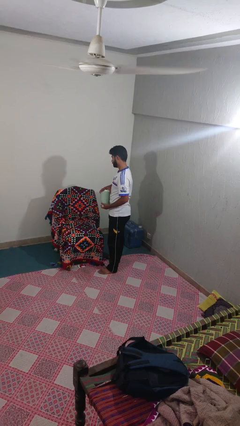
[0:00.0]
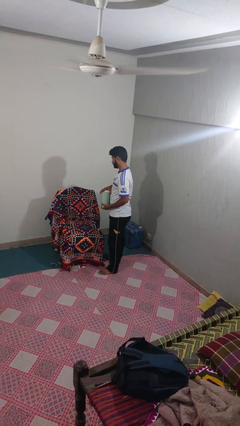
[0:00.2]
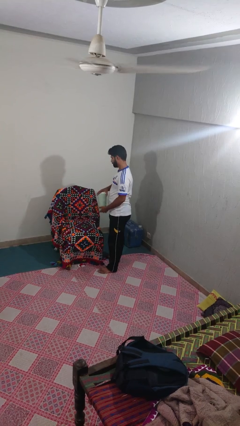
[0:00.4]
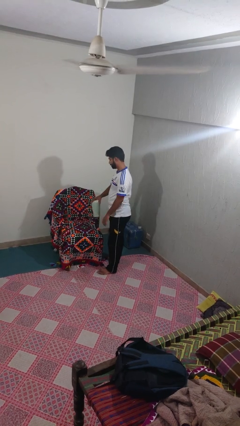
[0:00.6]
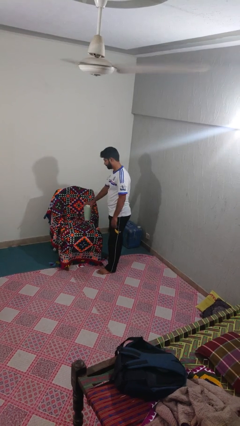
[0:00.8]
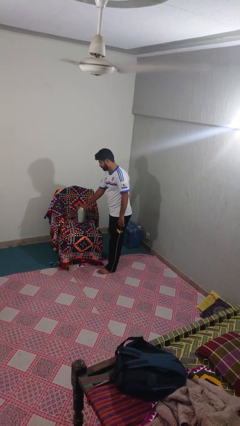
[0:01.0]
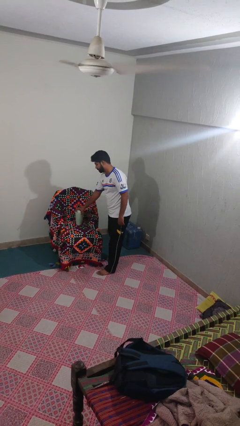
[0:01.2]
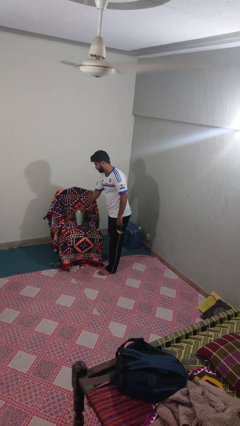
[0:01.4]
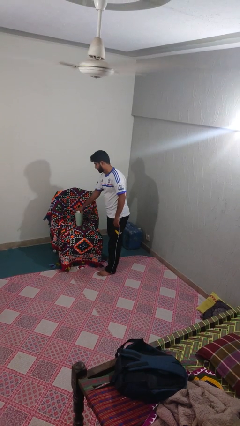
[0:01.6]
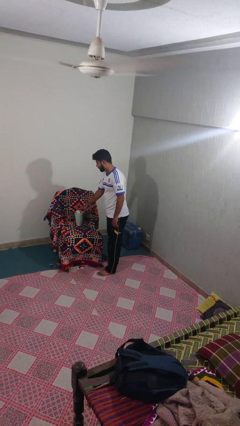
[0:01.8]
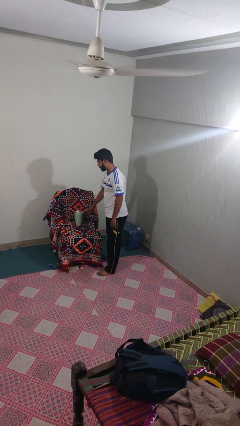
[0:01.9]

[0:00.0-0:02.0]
person puts down object on couch

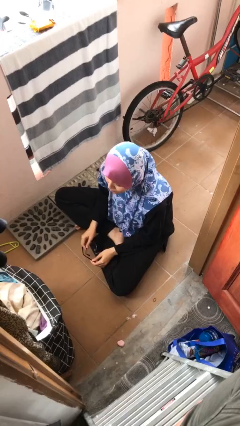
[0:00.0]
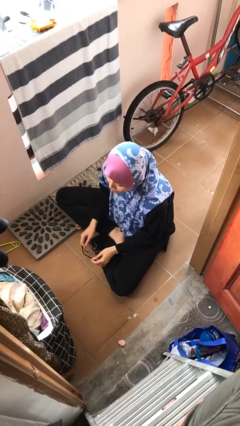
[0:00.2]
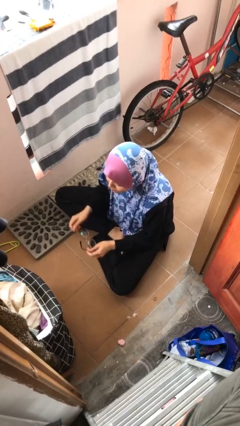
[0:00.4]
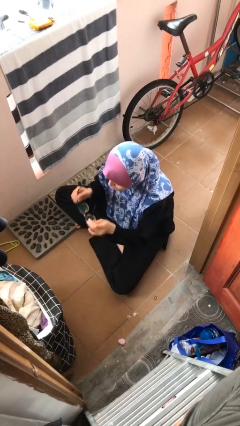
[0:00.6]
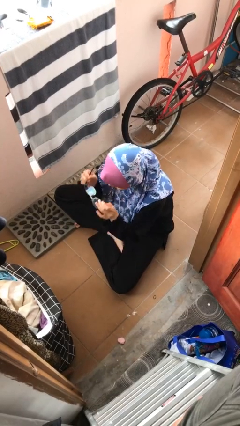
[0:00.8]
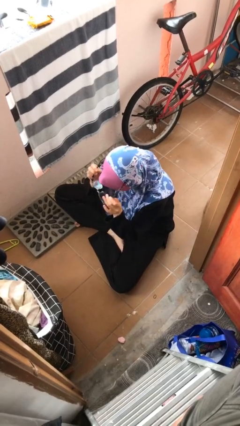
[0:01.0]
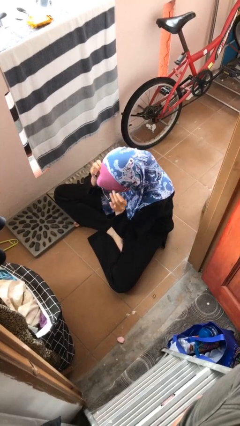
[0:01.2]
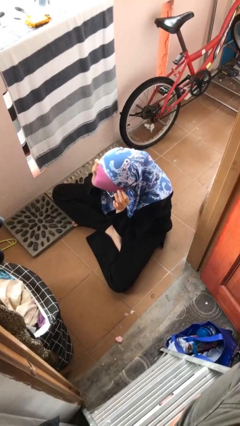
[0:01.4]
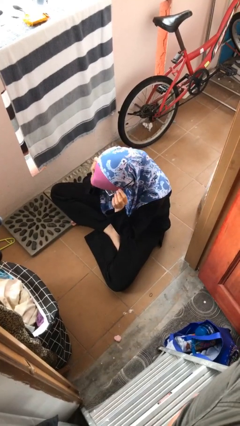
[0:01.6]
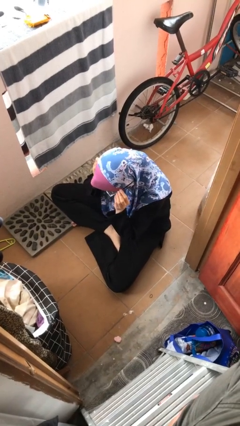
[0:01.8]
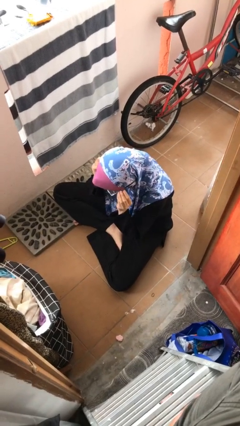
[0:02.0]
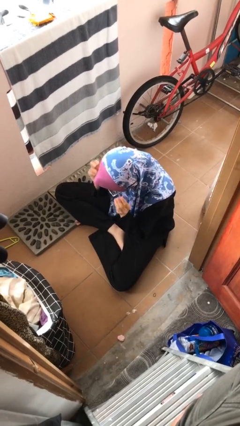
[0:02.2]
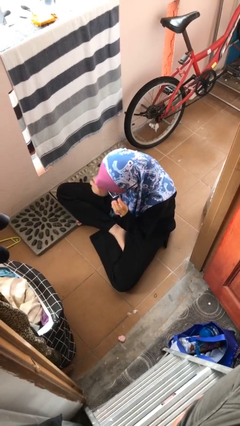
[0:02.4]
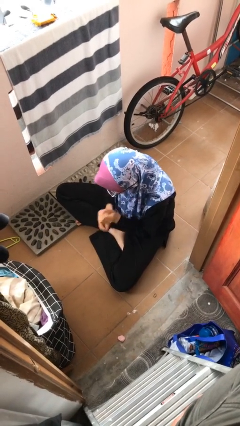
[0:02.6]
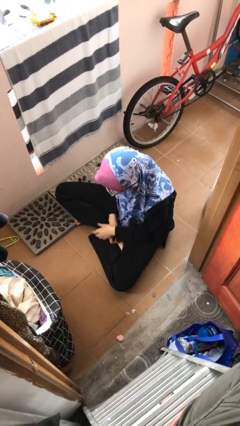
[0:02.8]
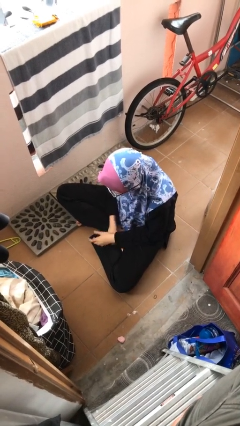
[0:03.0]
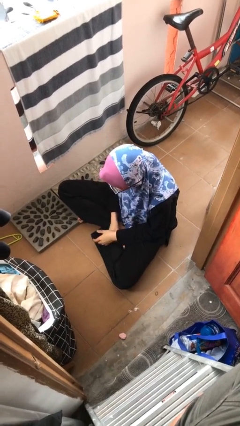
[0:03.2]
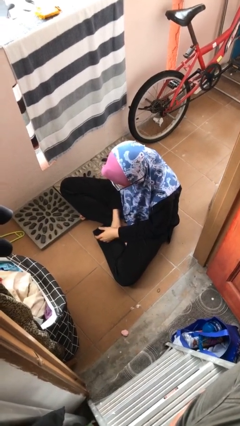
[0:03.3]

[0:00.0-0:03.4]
person puts on glasses

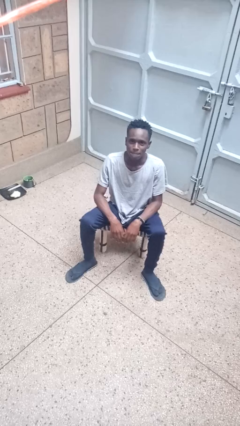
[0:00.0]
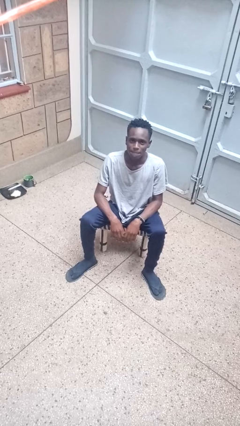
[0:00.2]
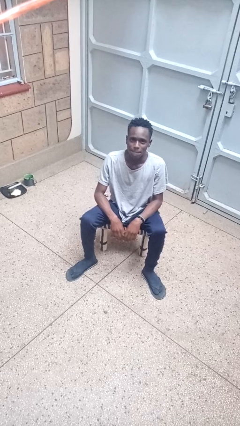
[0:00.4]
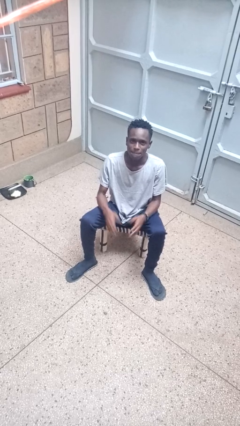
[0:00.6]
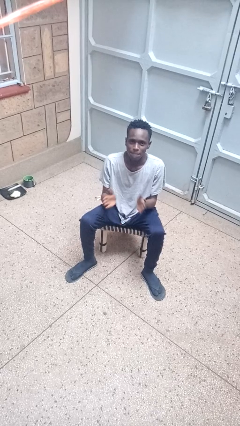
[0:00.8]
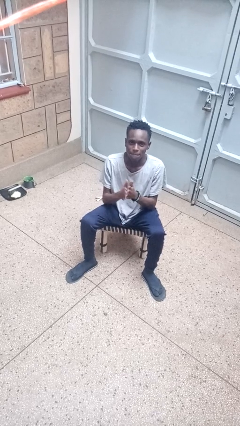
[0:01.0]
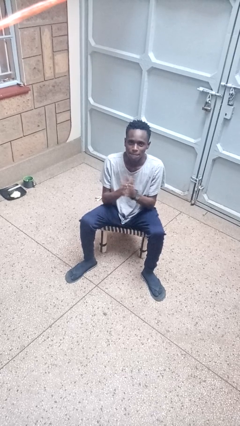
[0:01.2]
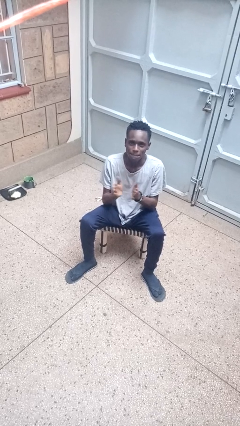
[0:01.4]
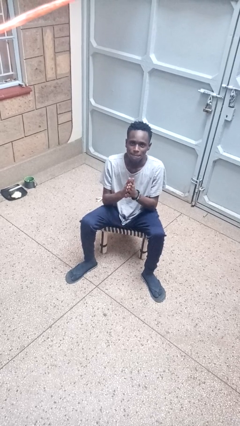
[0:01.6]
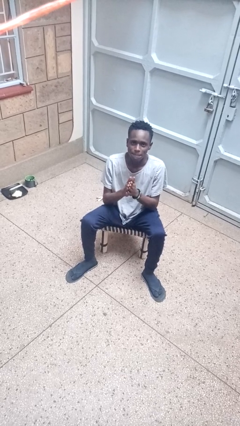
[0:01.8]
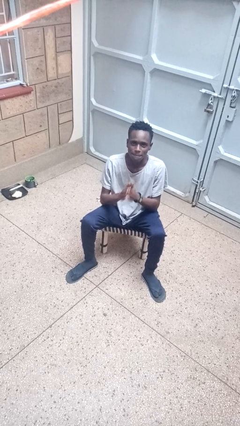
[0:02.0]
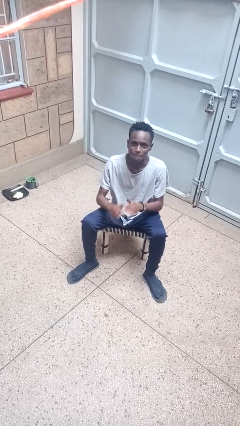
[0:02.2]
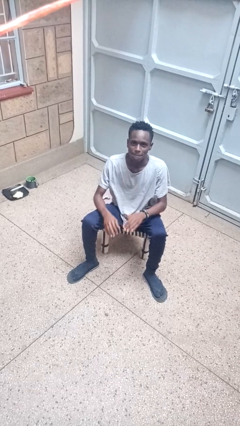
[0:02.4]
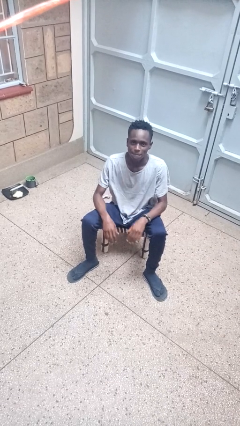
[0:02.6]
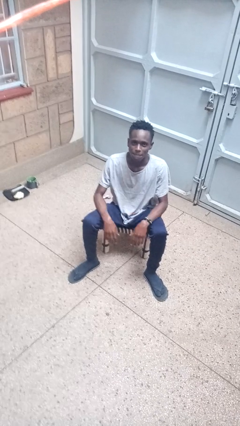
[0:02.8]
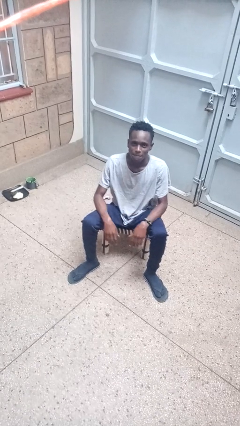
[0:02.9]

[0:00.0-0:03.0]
person claps hands

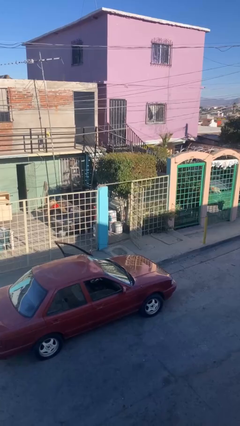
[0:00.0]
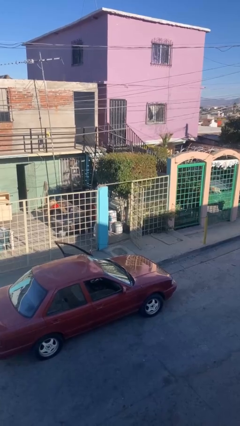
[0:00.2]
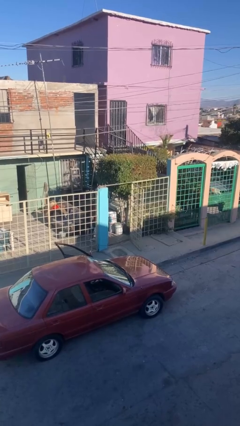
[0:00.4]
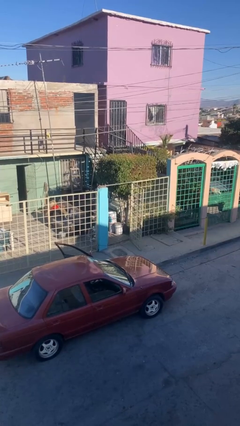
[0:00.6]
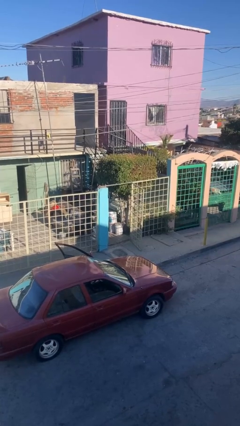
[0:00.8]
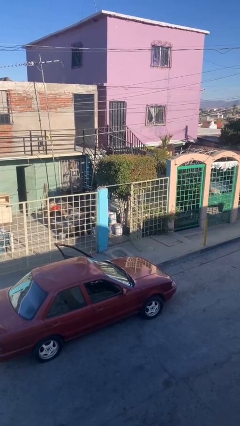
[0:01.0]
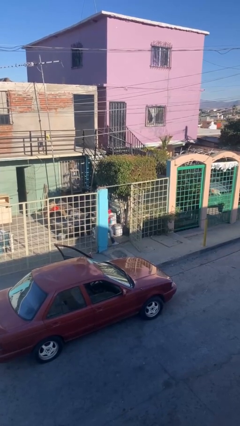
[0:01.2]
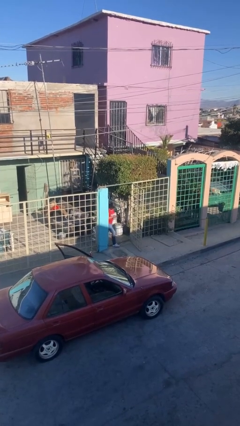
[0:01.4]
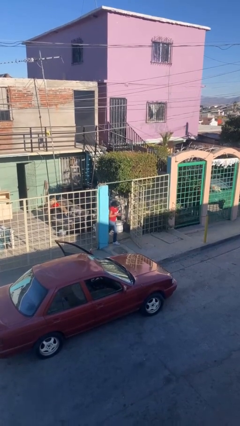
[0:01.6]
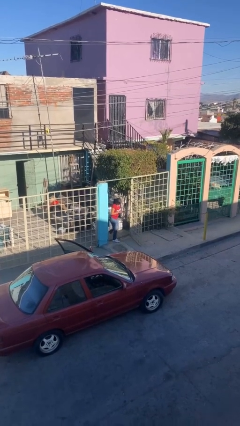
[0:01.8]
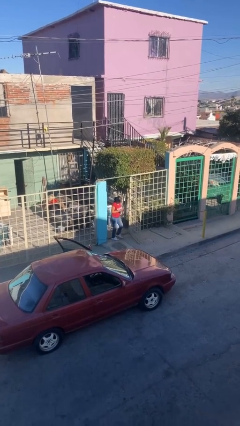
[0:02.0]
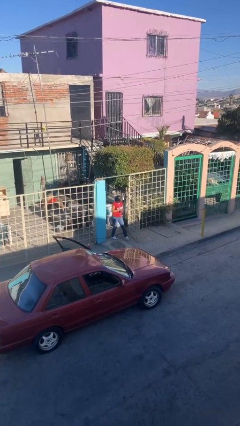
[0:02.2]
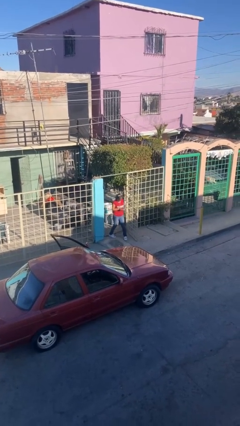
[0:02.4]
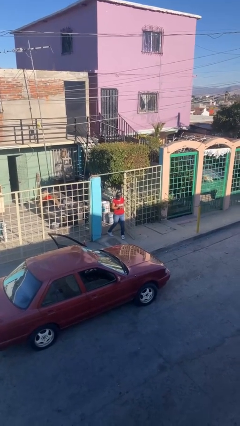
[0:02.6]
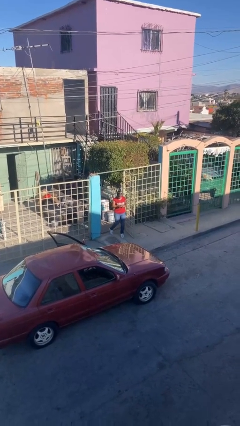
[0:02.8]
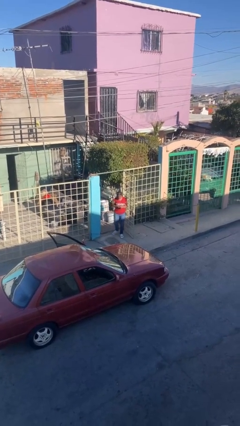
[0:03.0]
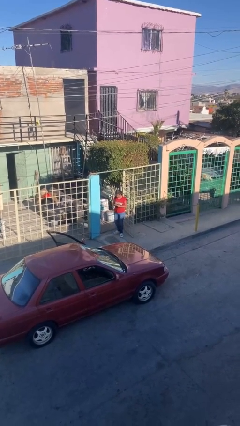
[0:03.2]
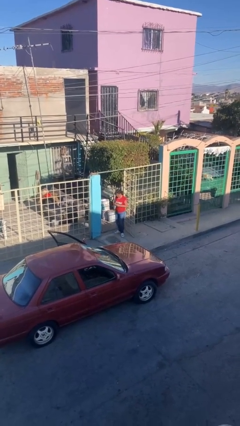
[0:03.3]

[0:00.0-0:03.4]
person enters scene through structure

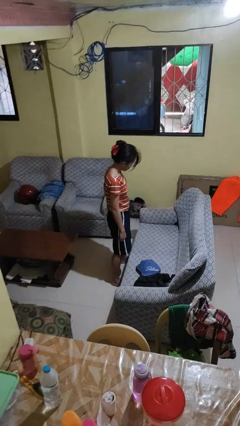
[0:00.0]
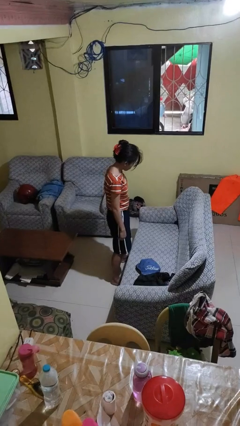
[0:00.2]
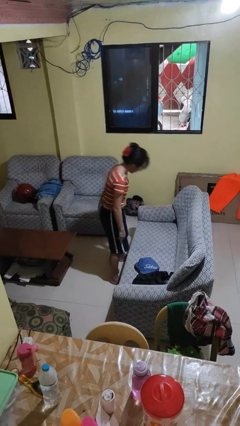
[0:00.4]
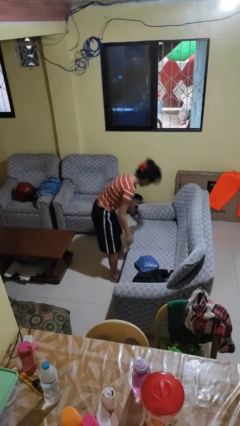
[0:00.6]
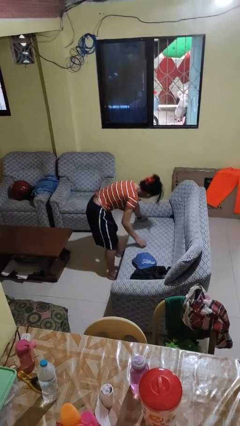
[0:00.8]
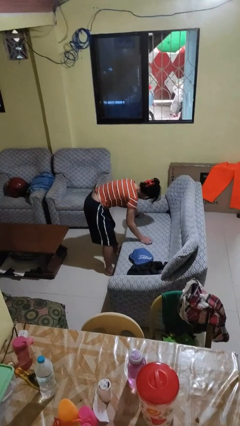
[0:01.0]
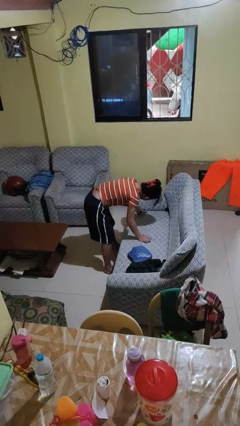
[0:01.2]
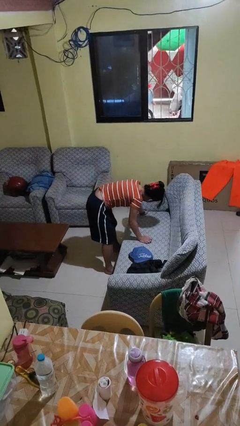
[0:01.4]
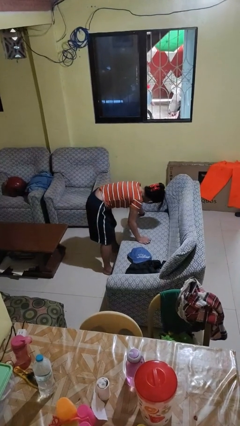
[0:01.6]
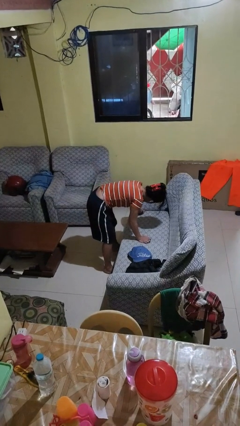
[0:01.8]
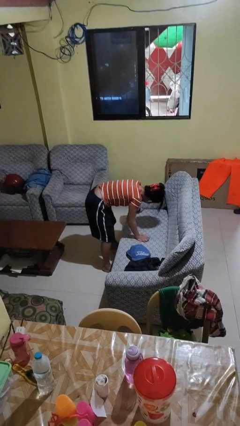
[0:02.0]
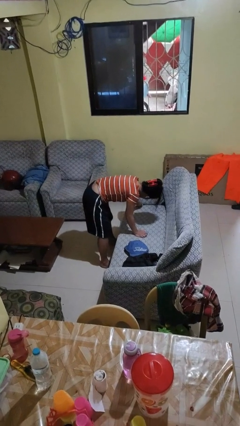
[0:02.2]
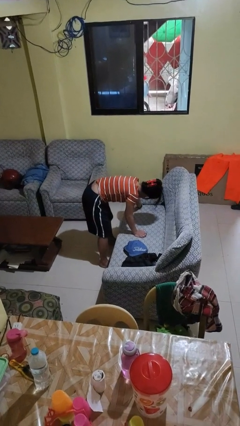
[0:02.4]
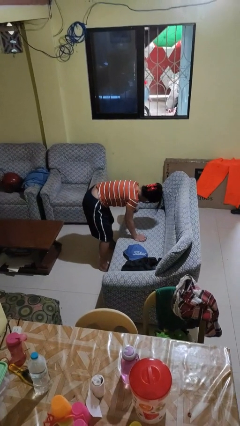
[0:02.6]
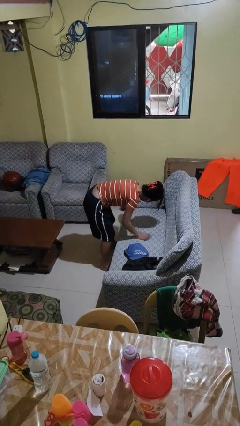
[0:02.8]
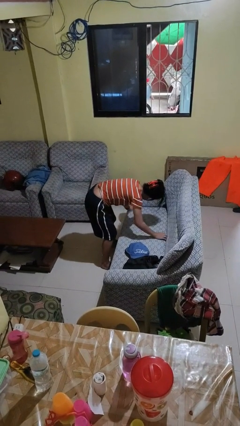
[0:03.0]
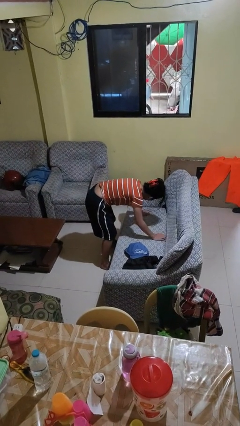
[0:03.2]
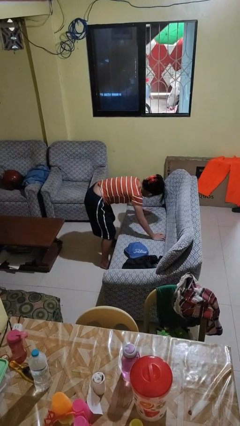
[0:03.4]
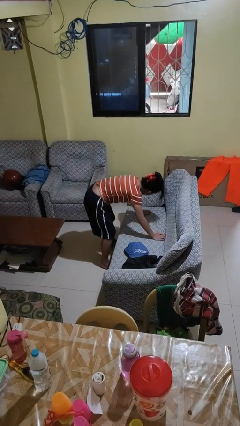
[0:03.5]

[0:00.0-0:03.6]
person searches in couch

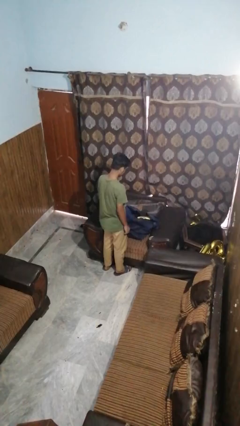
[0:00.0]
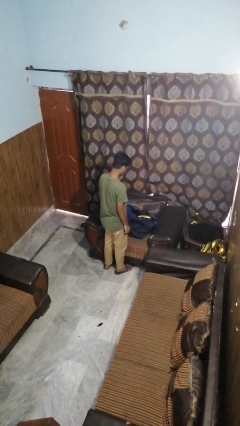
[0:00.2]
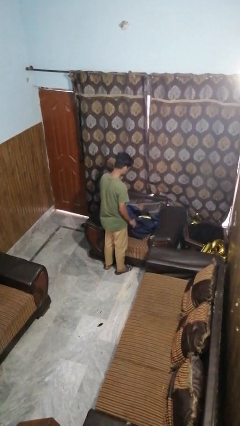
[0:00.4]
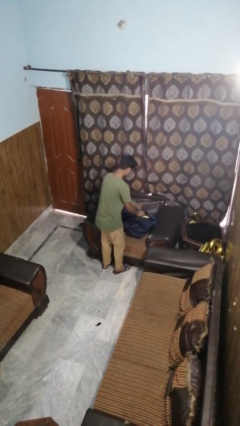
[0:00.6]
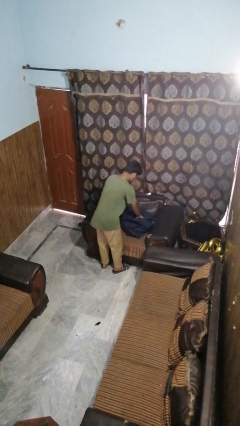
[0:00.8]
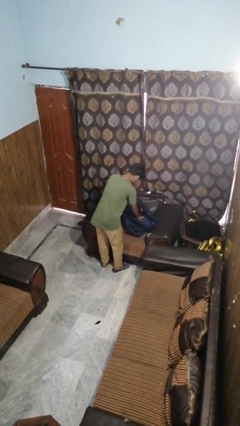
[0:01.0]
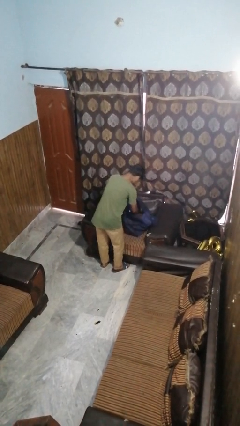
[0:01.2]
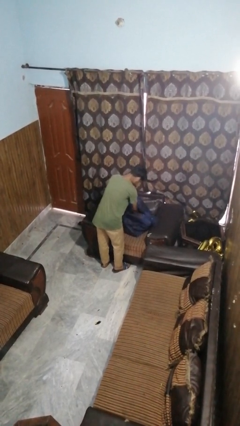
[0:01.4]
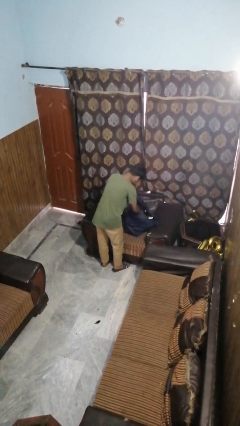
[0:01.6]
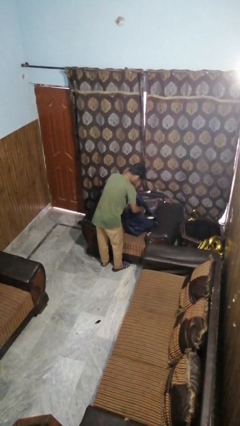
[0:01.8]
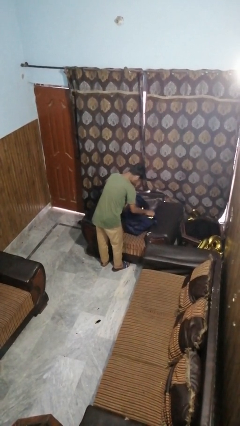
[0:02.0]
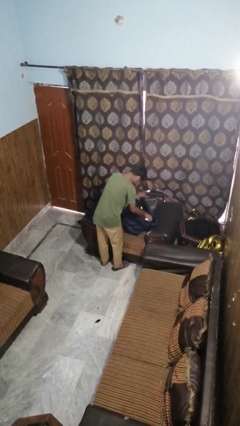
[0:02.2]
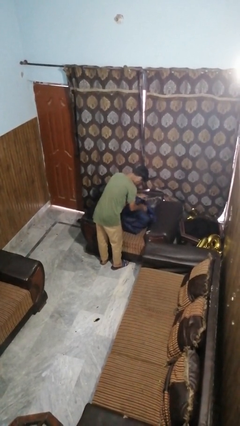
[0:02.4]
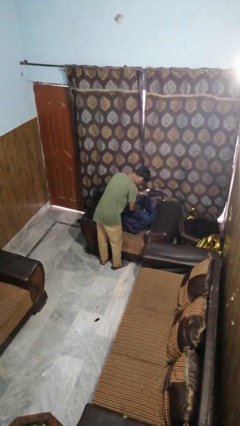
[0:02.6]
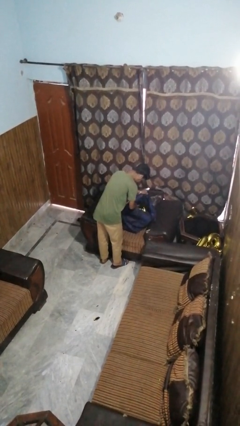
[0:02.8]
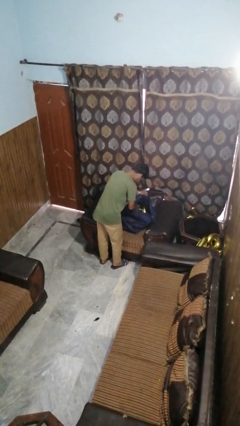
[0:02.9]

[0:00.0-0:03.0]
person searches in bag
